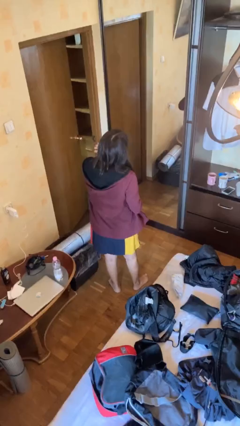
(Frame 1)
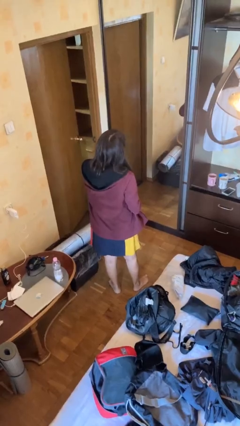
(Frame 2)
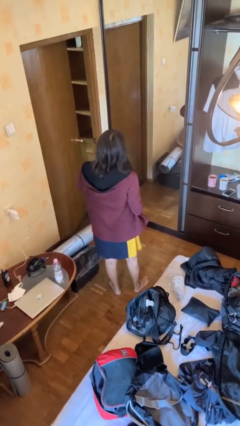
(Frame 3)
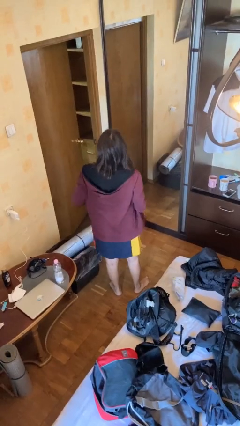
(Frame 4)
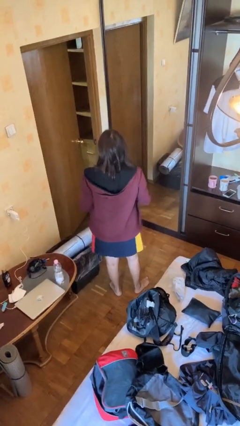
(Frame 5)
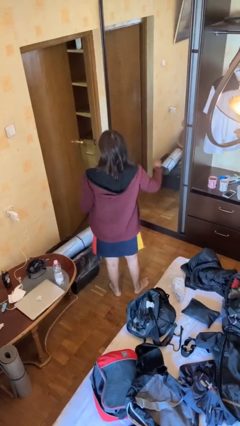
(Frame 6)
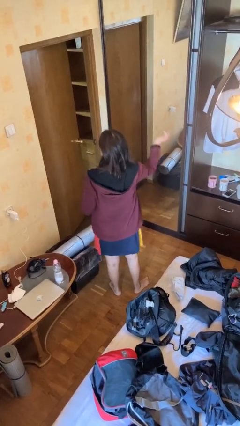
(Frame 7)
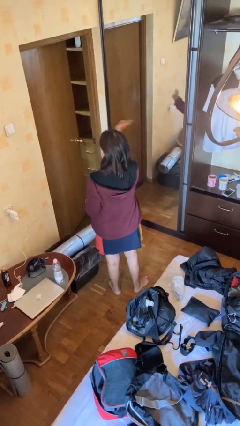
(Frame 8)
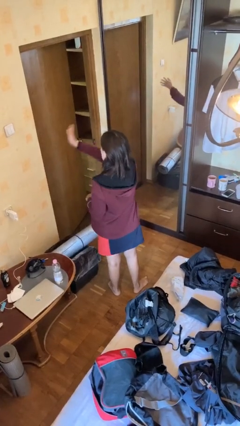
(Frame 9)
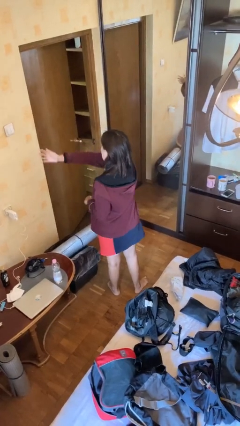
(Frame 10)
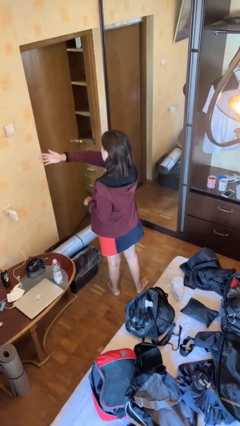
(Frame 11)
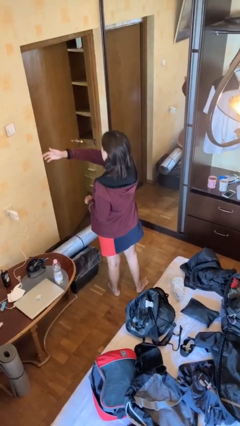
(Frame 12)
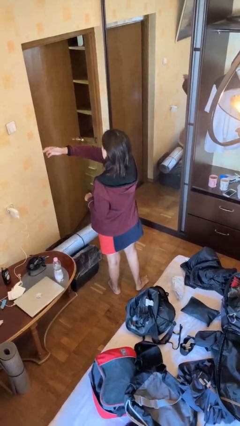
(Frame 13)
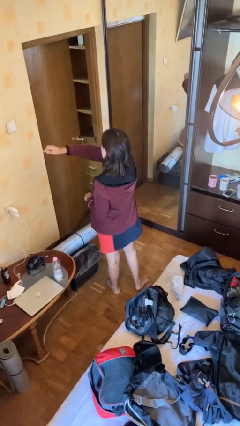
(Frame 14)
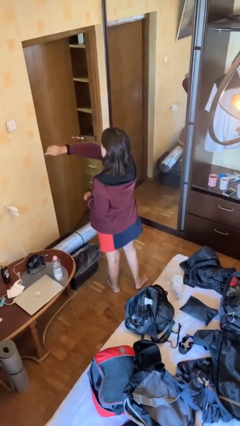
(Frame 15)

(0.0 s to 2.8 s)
person gestures swipe left

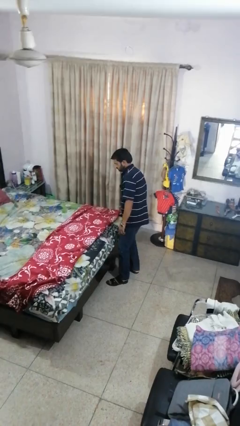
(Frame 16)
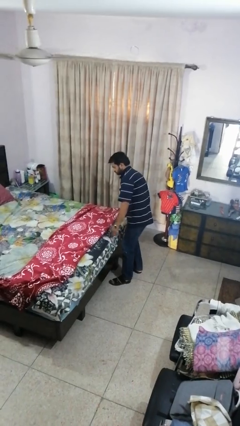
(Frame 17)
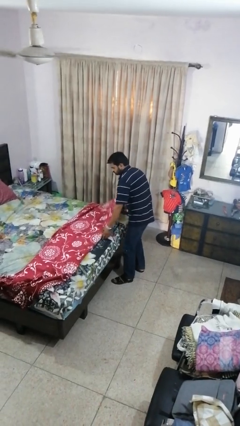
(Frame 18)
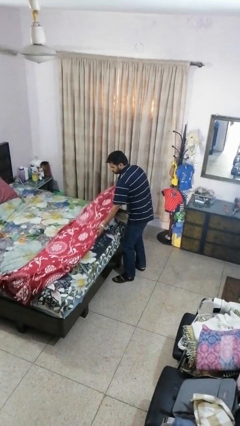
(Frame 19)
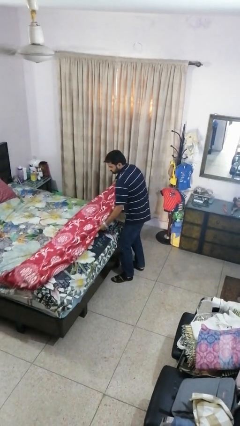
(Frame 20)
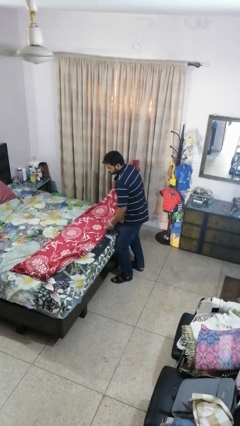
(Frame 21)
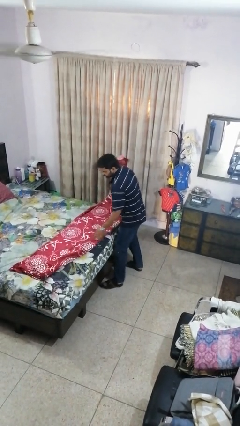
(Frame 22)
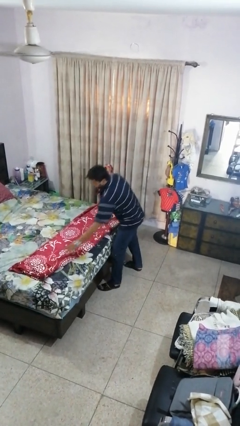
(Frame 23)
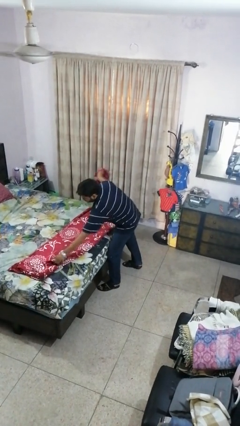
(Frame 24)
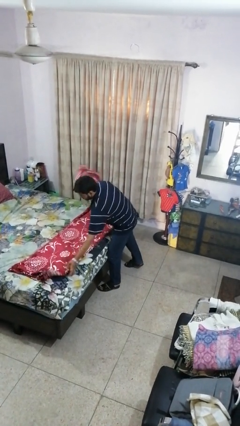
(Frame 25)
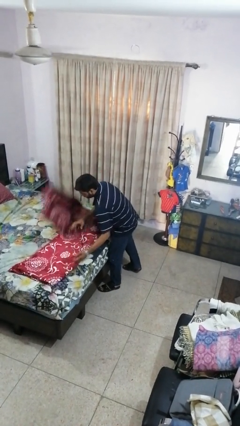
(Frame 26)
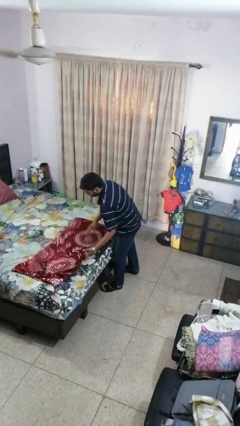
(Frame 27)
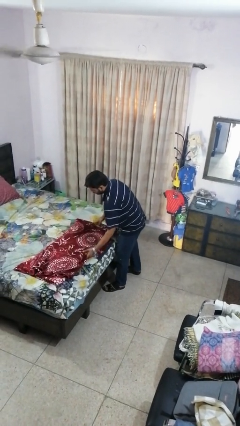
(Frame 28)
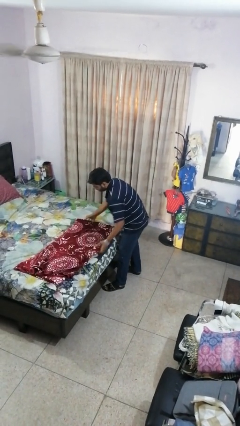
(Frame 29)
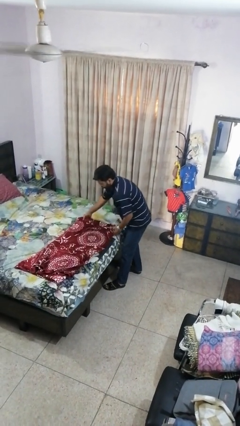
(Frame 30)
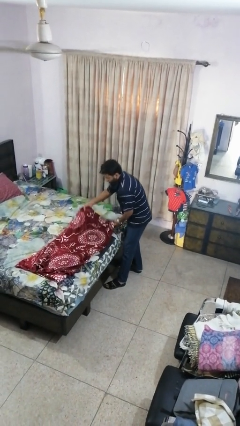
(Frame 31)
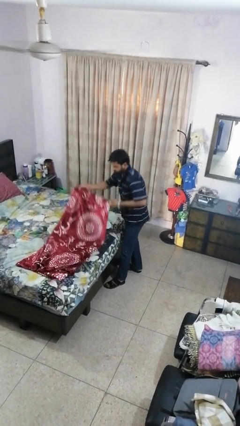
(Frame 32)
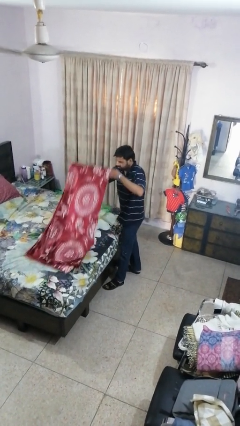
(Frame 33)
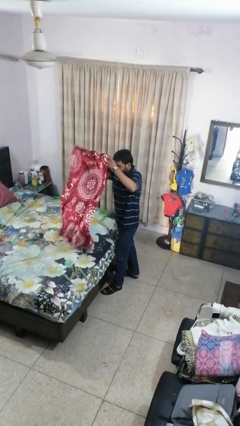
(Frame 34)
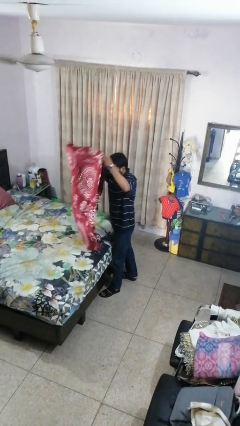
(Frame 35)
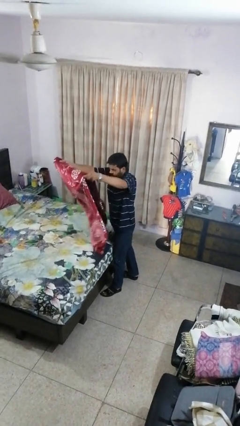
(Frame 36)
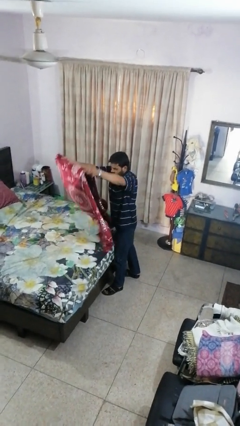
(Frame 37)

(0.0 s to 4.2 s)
person crumples paper

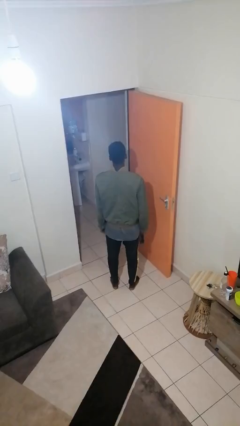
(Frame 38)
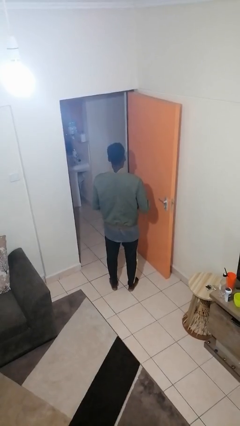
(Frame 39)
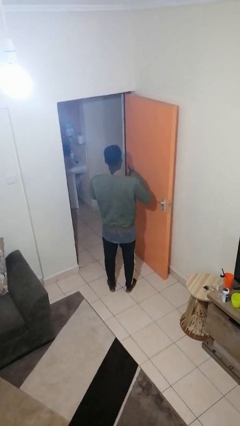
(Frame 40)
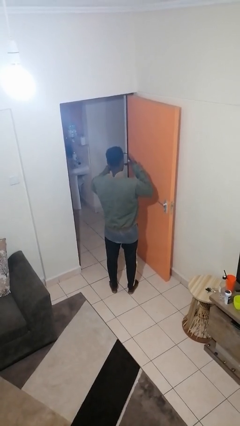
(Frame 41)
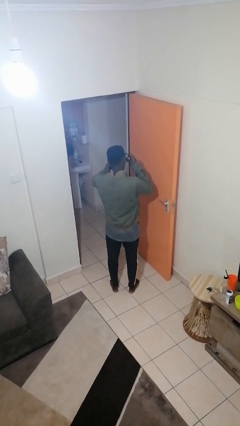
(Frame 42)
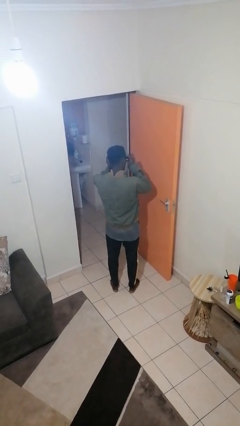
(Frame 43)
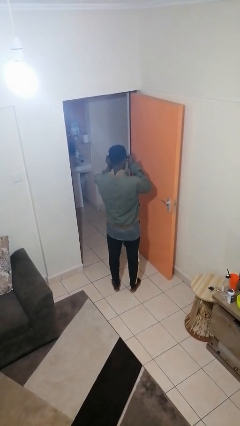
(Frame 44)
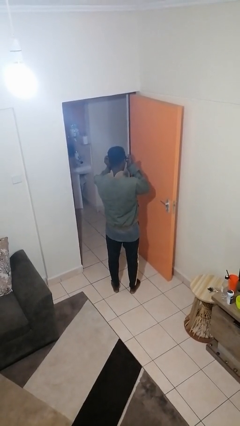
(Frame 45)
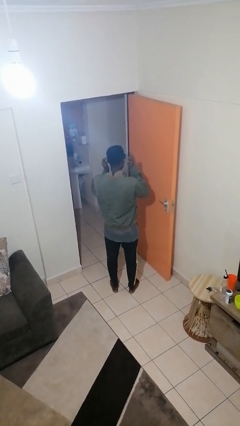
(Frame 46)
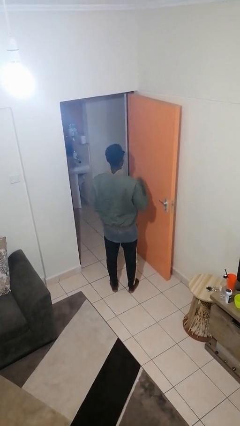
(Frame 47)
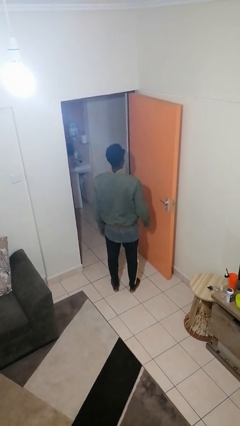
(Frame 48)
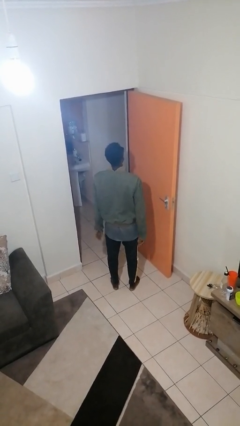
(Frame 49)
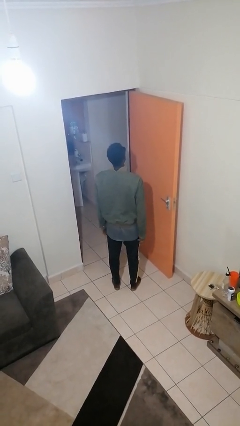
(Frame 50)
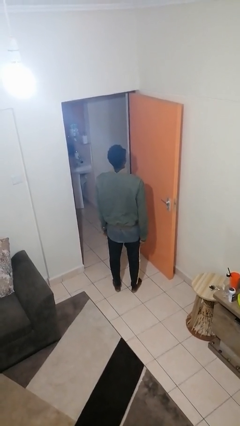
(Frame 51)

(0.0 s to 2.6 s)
person puts on sunglasses

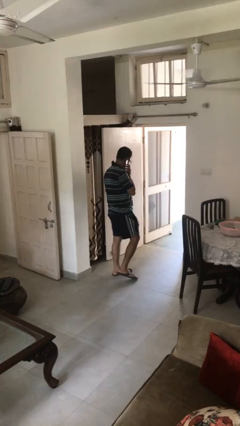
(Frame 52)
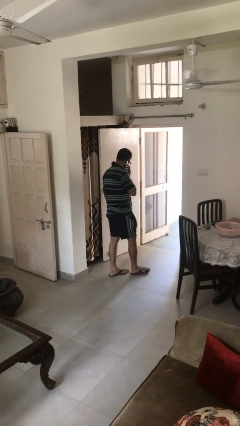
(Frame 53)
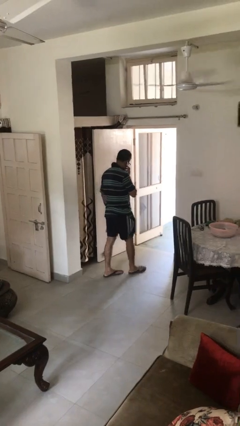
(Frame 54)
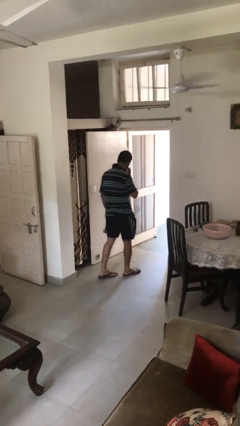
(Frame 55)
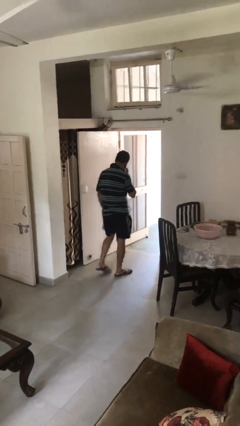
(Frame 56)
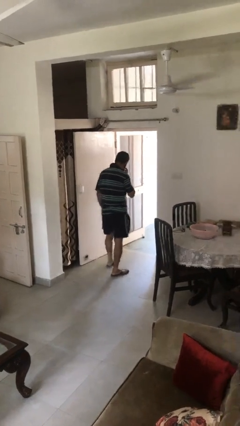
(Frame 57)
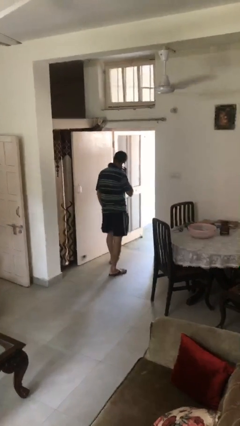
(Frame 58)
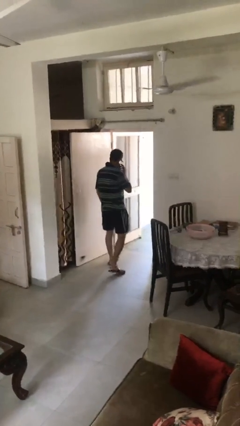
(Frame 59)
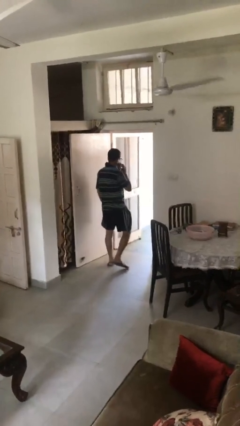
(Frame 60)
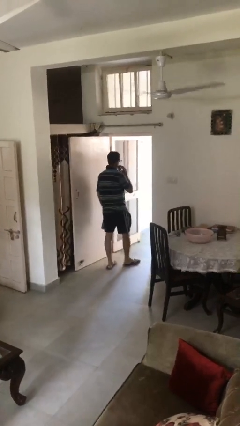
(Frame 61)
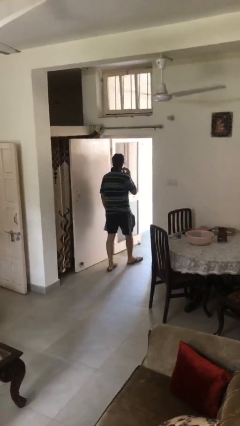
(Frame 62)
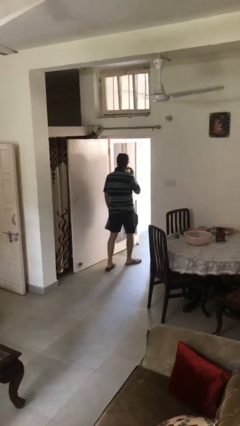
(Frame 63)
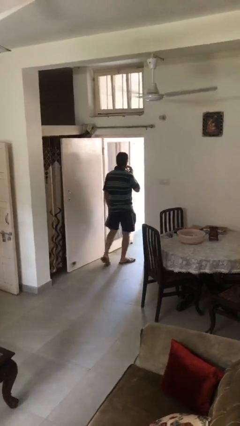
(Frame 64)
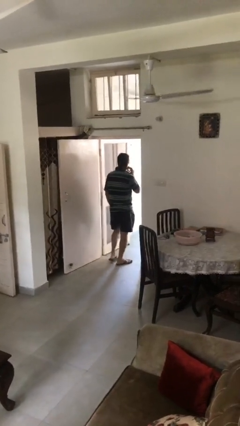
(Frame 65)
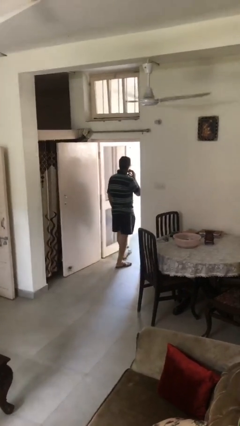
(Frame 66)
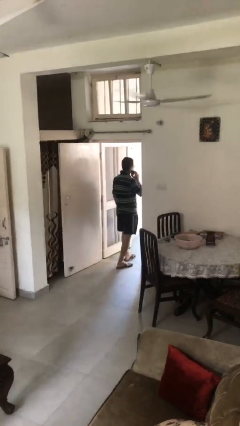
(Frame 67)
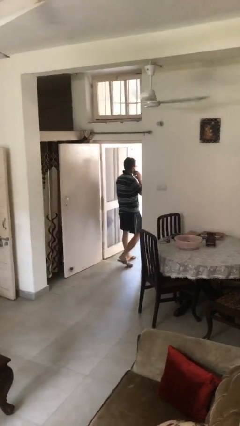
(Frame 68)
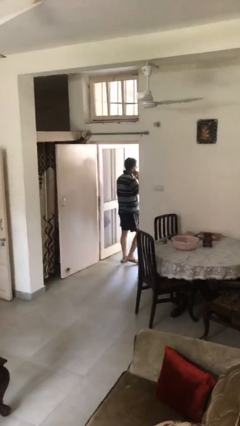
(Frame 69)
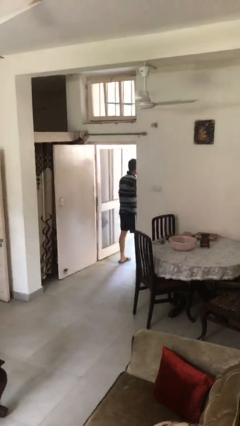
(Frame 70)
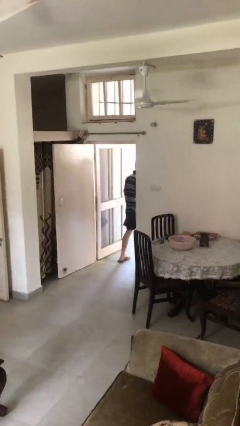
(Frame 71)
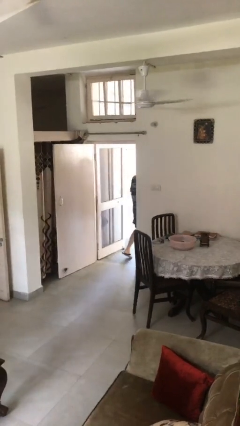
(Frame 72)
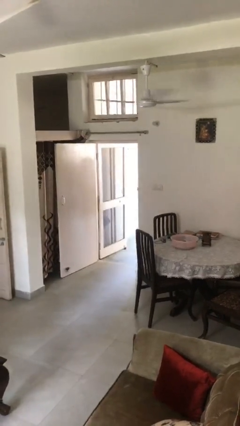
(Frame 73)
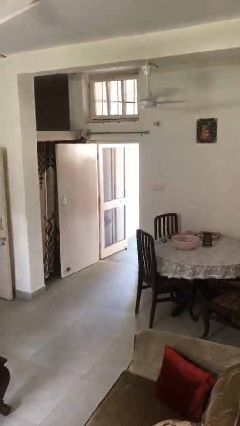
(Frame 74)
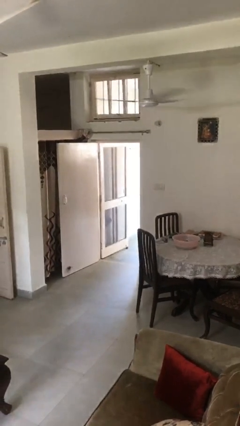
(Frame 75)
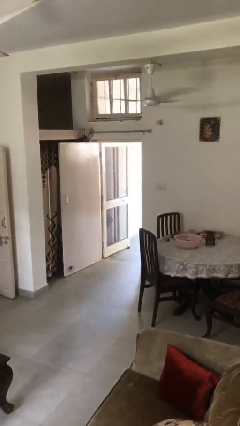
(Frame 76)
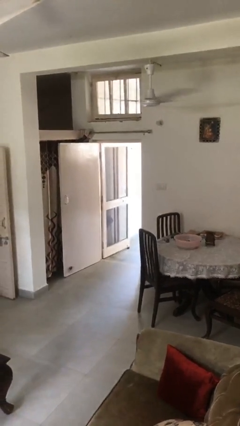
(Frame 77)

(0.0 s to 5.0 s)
person exits scene through structure

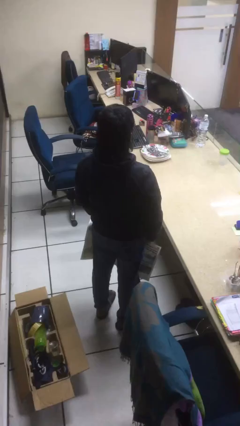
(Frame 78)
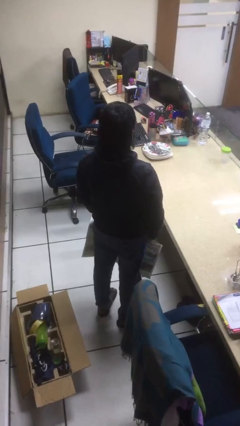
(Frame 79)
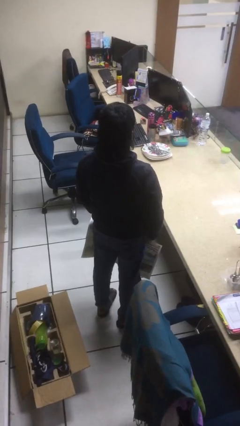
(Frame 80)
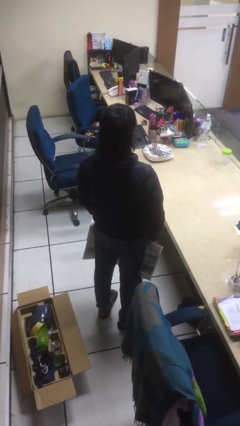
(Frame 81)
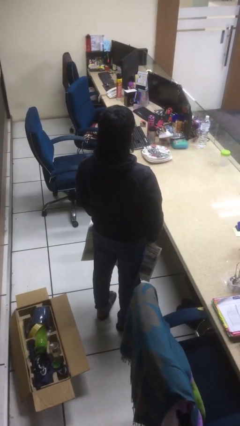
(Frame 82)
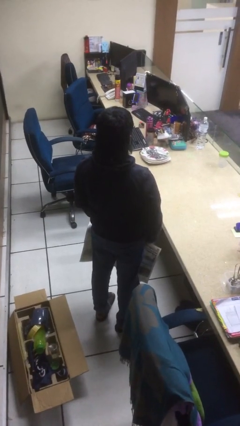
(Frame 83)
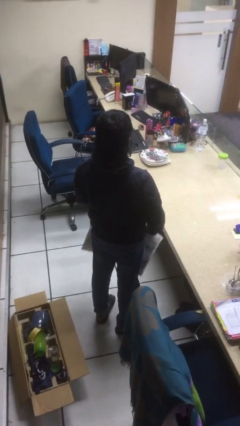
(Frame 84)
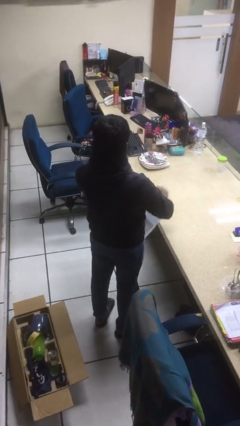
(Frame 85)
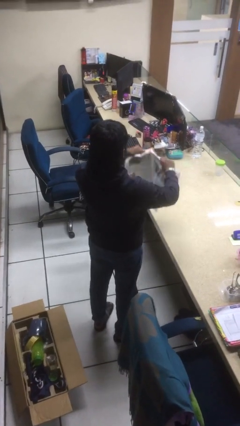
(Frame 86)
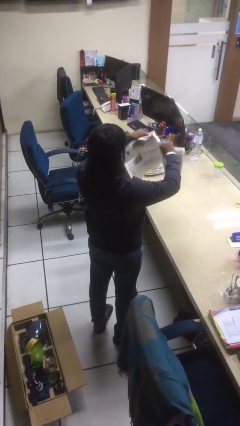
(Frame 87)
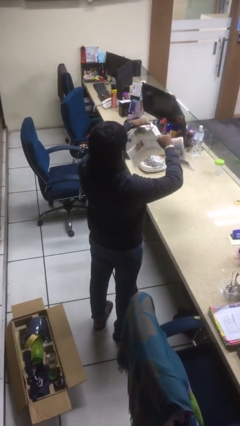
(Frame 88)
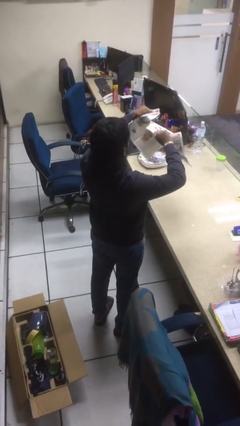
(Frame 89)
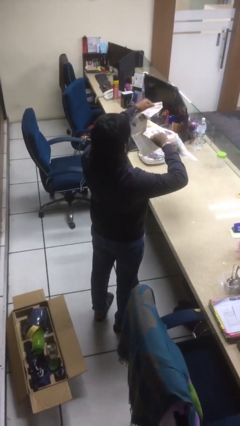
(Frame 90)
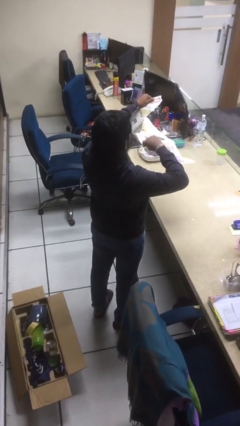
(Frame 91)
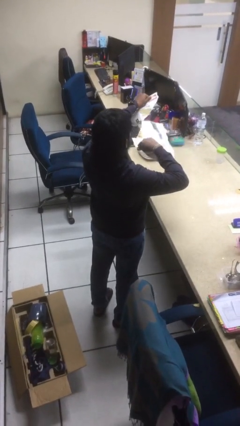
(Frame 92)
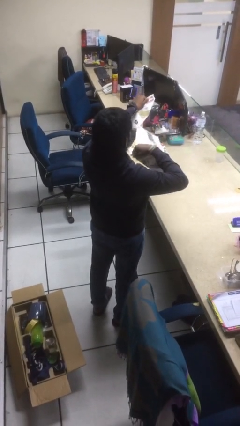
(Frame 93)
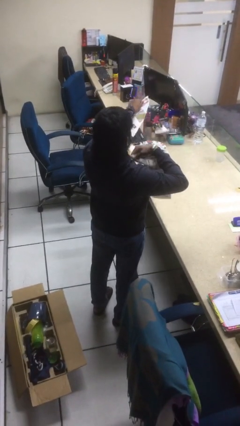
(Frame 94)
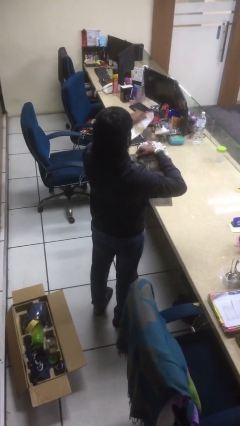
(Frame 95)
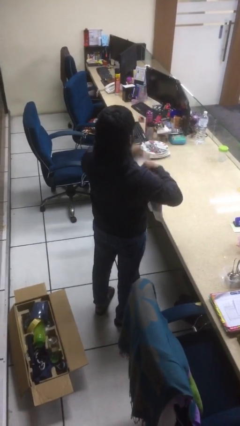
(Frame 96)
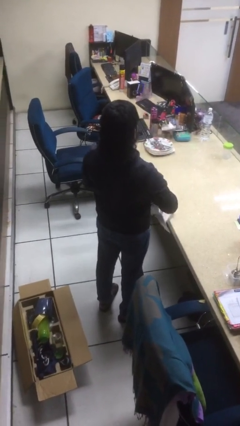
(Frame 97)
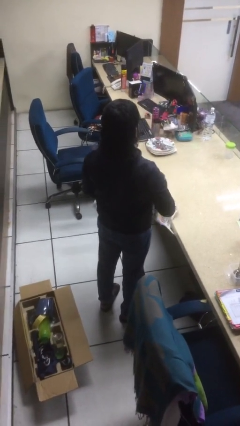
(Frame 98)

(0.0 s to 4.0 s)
person tears paper
